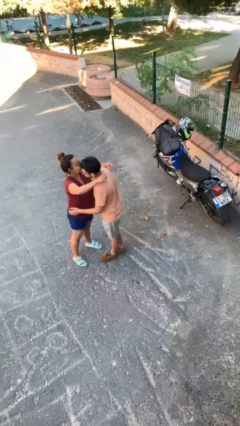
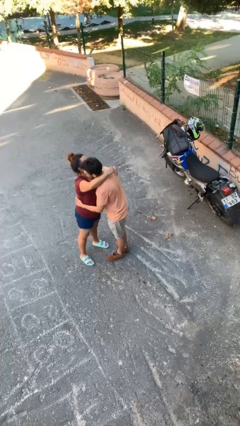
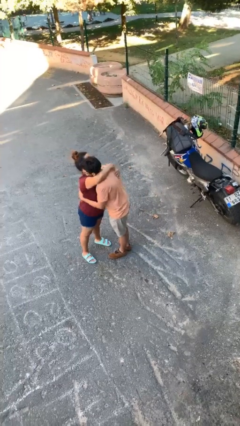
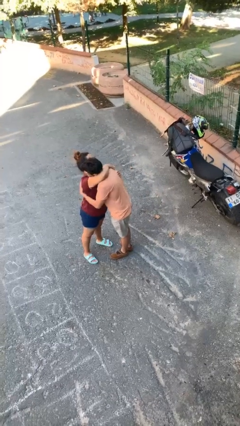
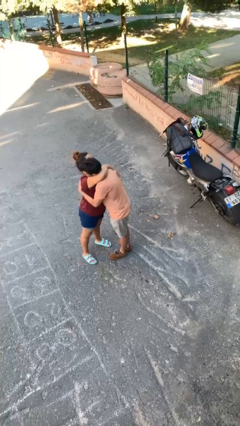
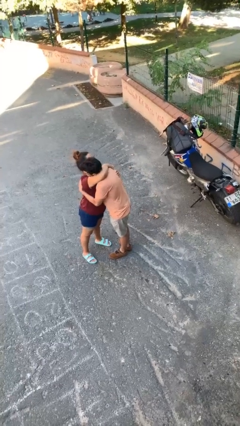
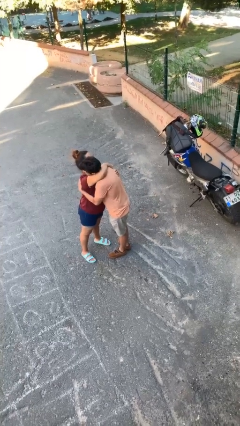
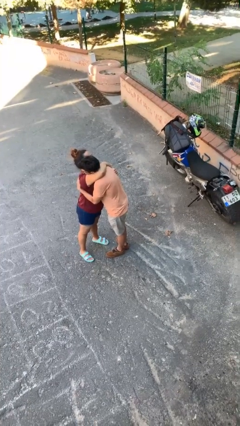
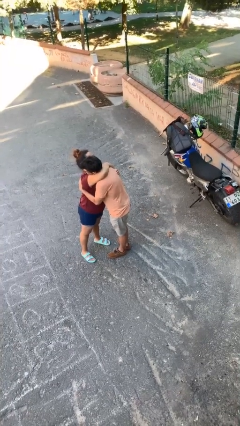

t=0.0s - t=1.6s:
person embraces person

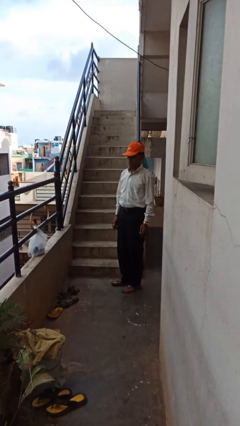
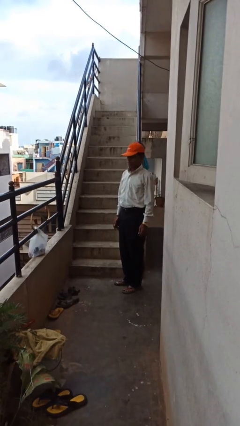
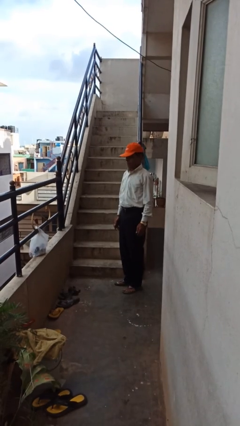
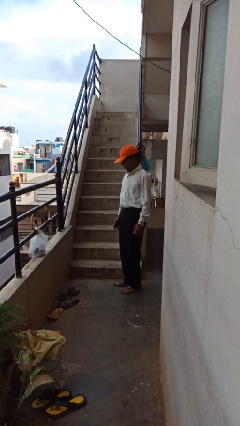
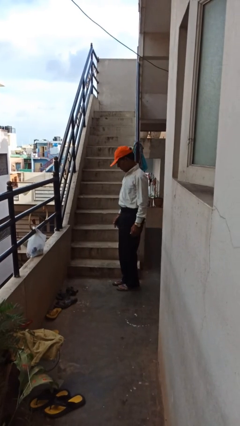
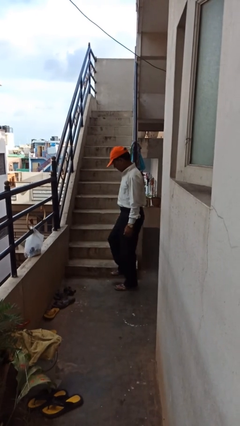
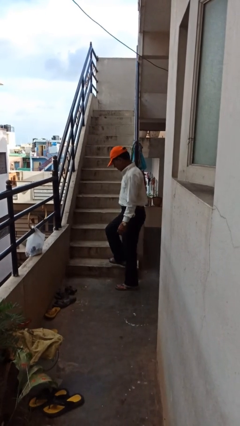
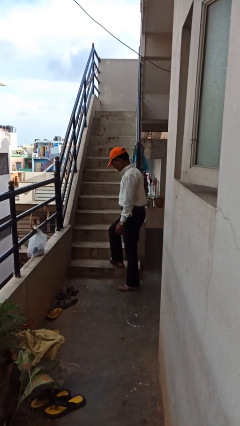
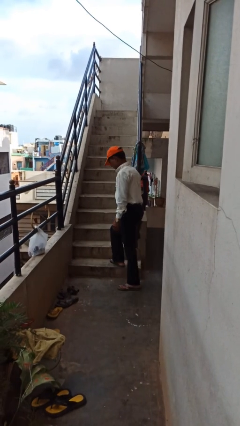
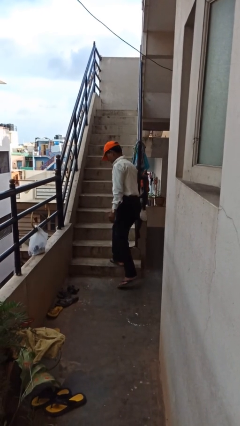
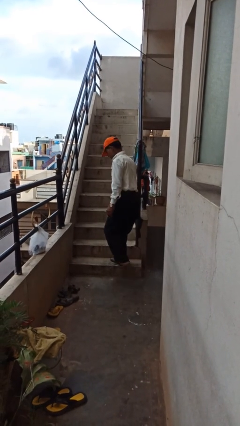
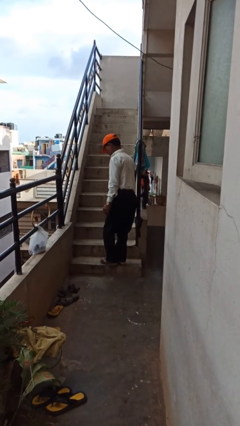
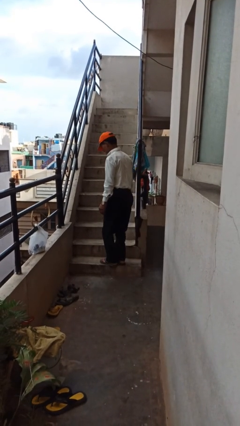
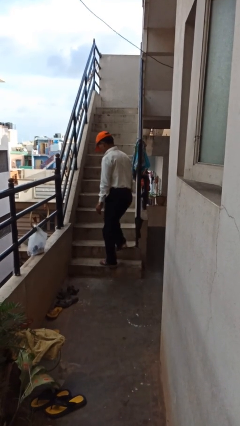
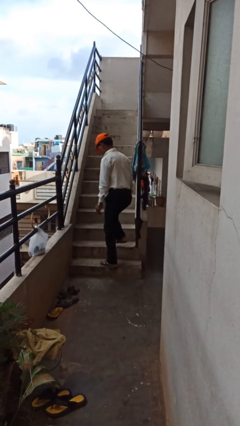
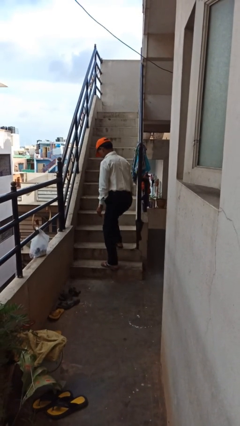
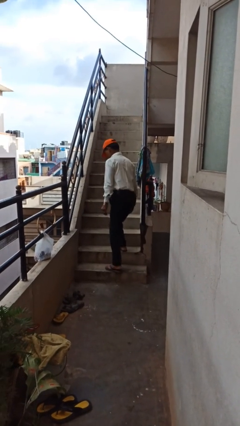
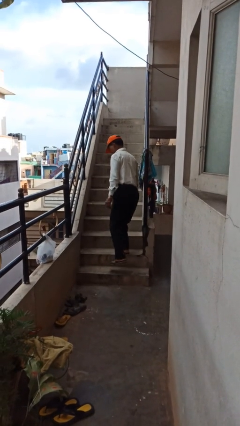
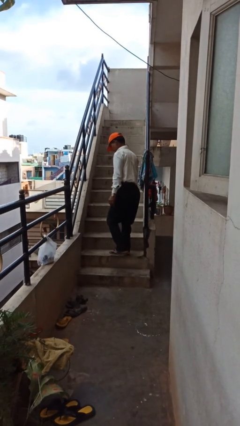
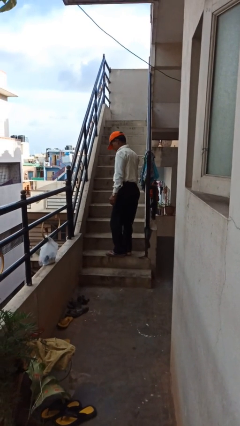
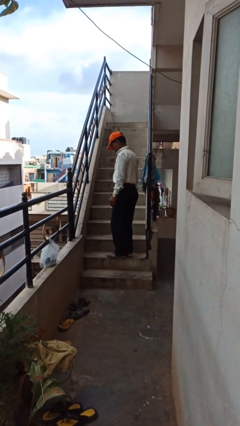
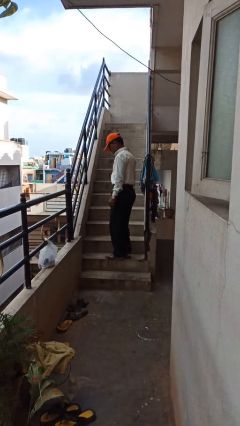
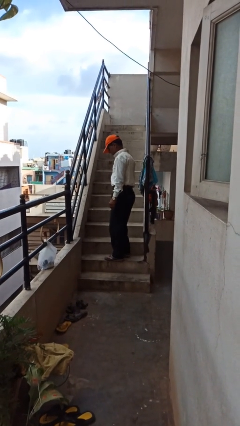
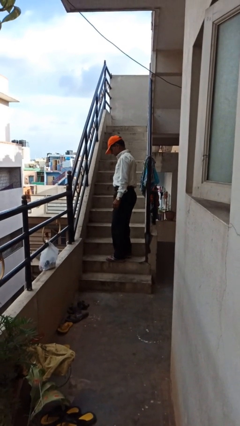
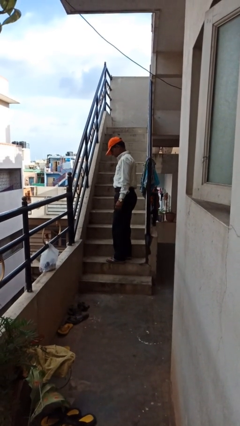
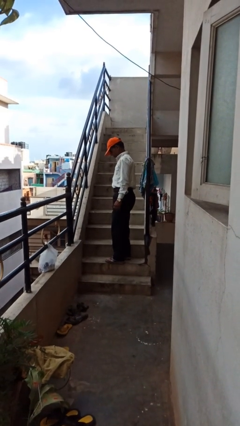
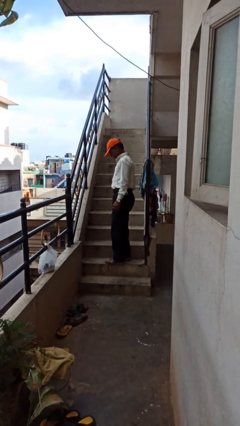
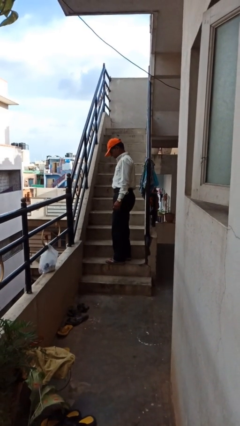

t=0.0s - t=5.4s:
person climbs up stairs

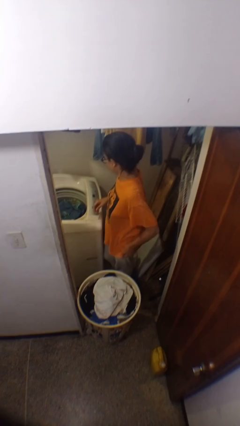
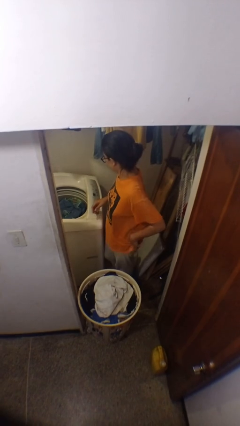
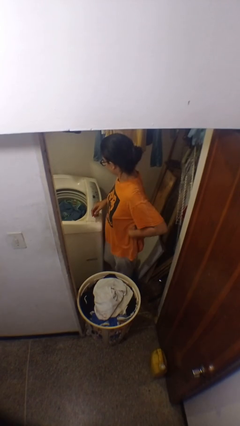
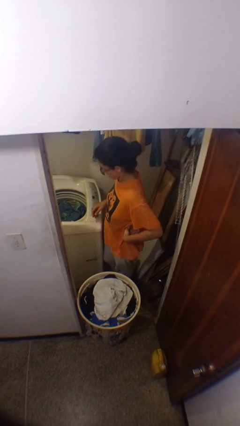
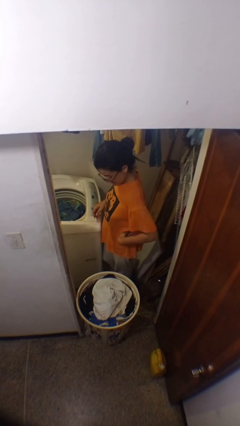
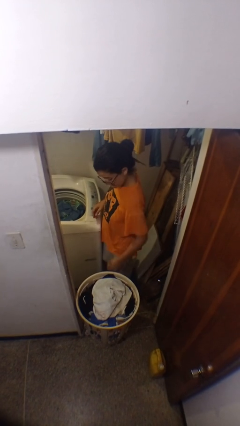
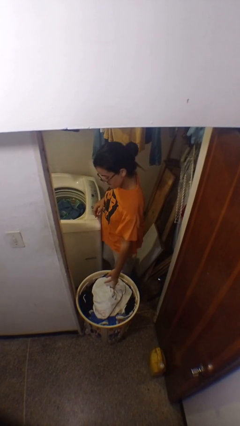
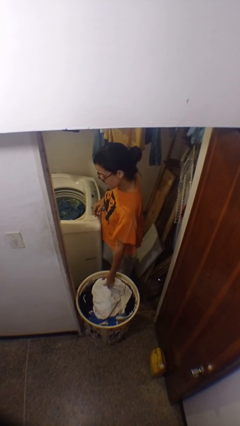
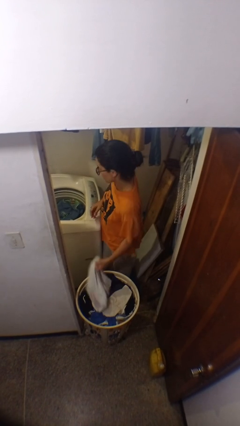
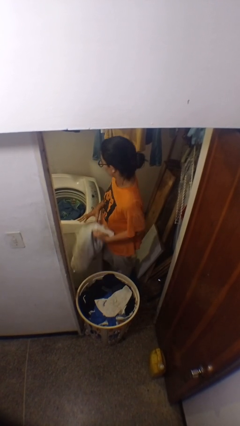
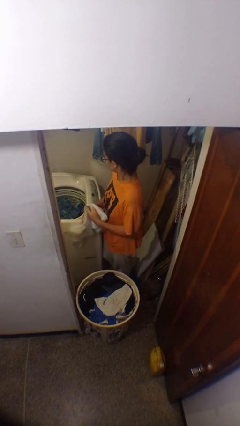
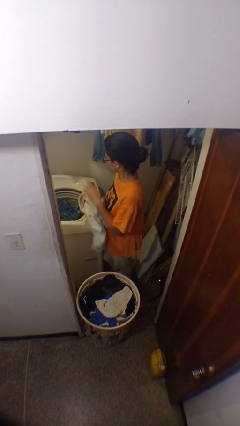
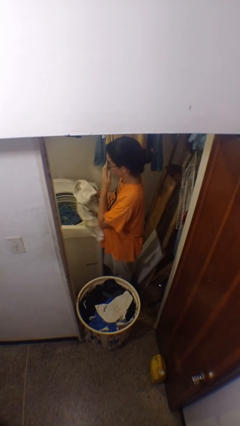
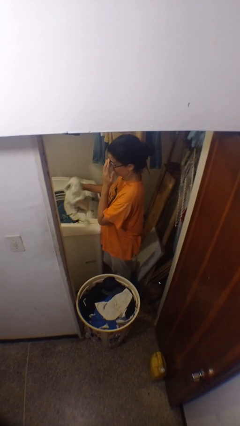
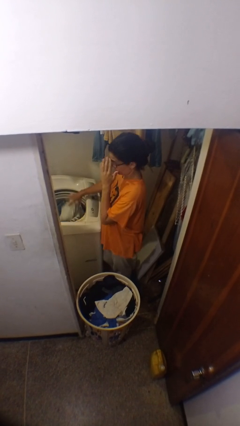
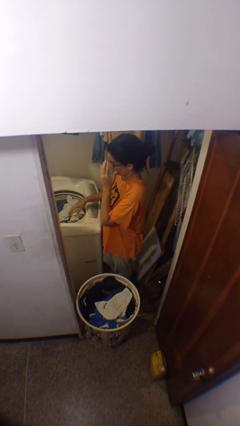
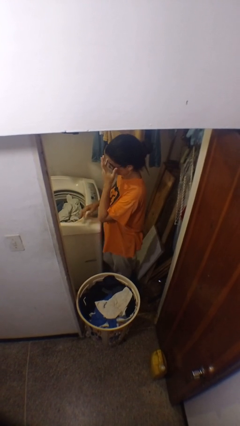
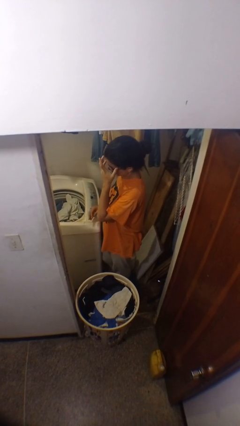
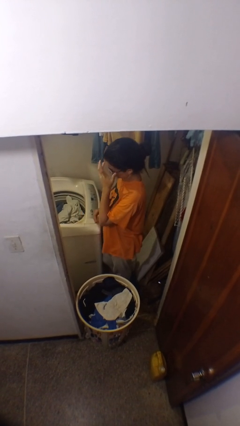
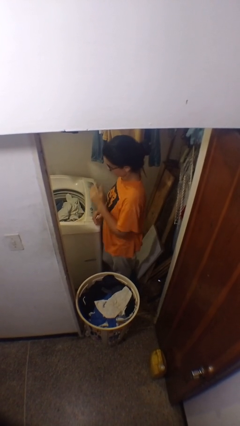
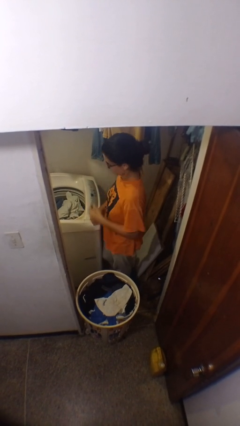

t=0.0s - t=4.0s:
person loads clotheswasher

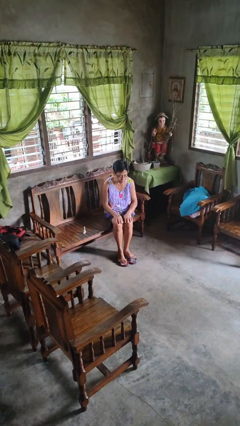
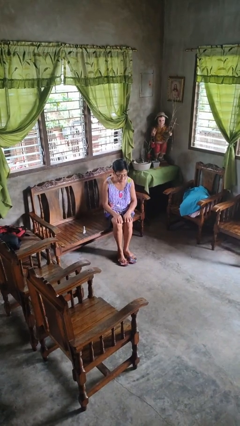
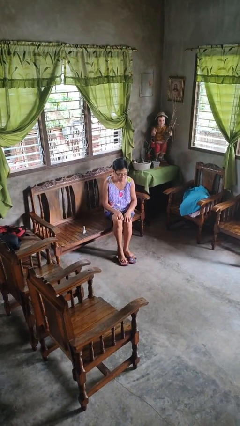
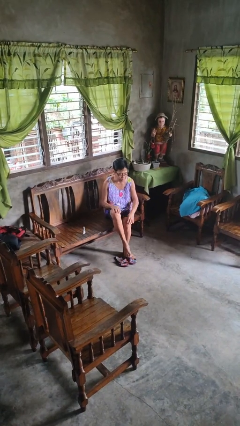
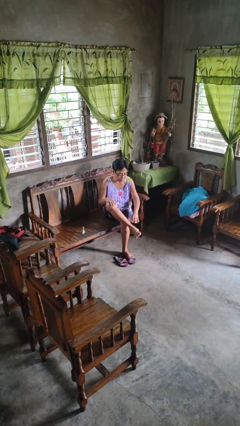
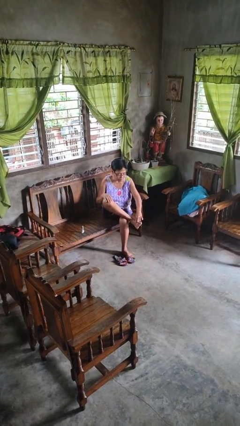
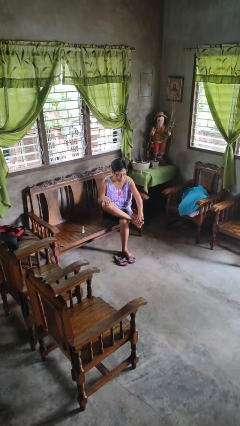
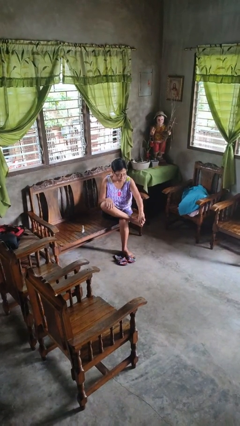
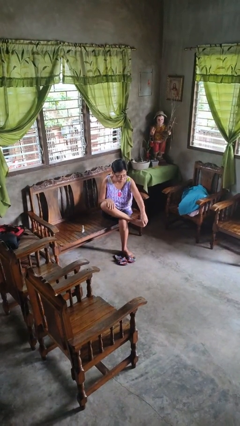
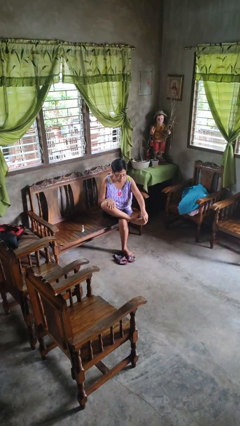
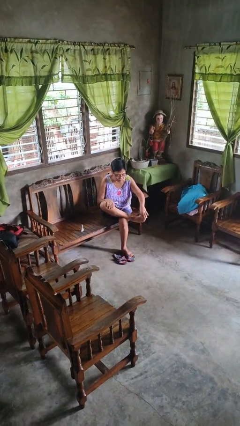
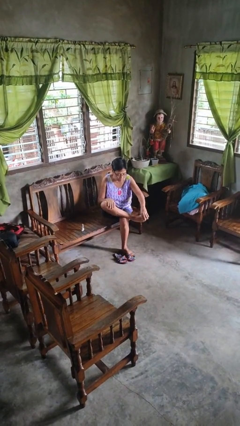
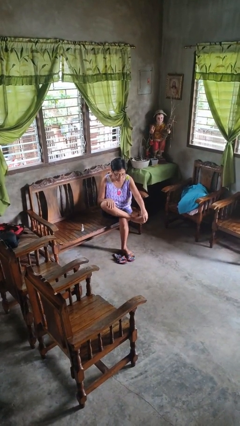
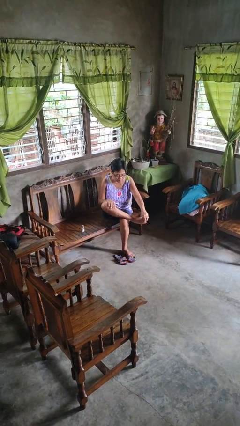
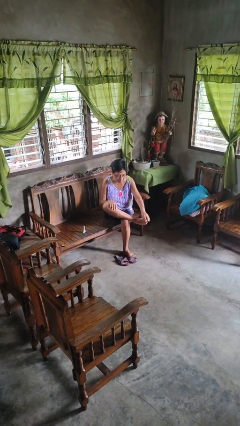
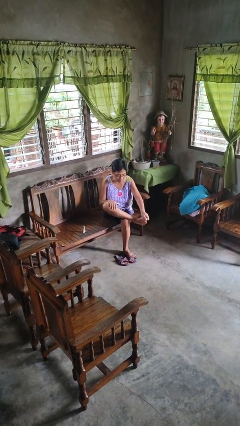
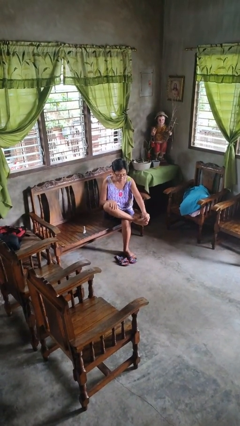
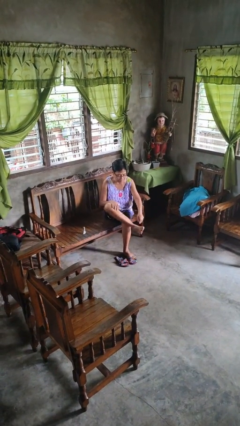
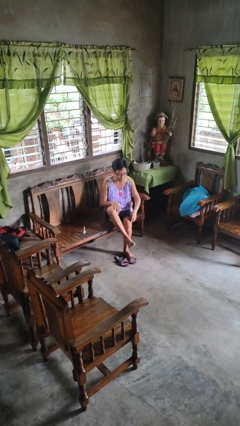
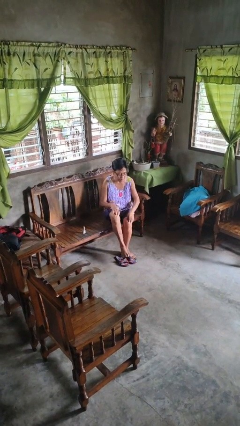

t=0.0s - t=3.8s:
person rubs foot

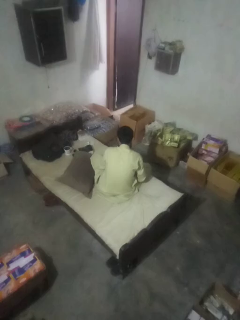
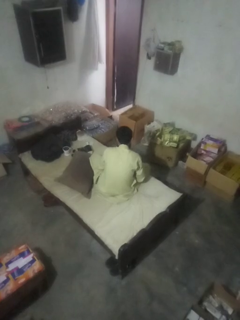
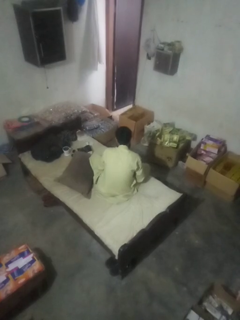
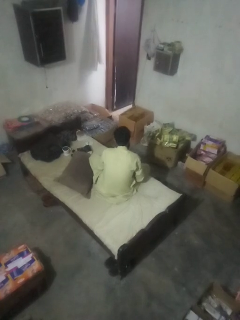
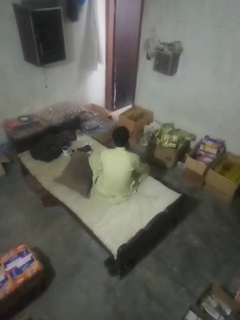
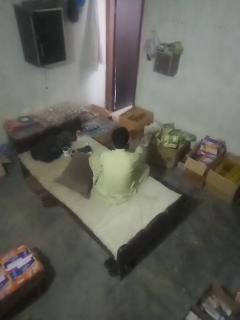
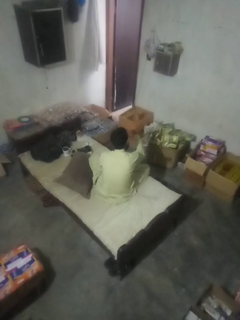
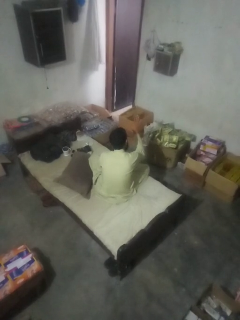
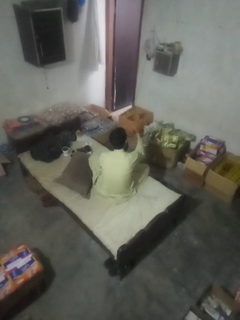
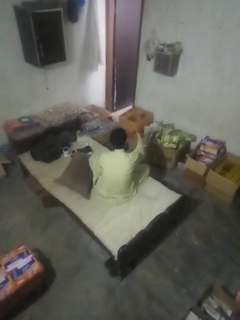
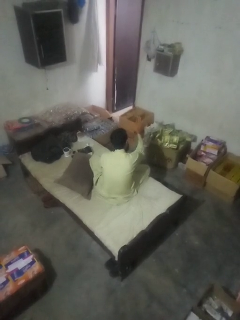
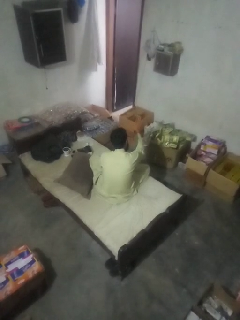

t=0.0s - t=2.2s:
person gestures stop

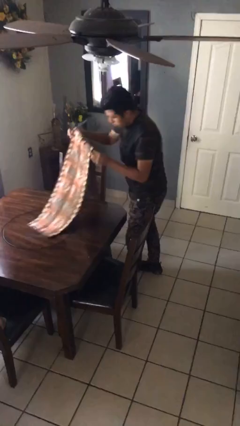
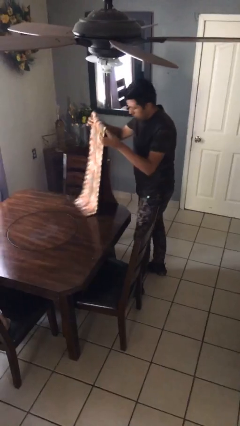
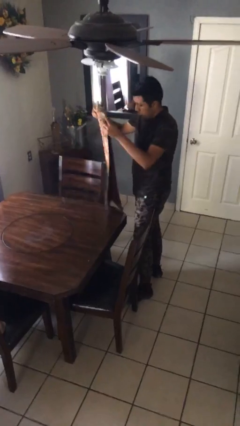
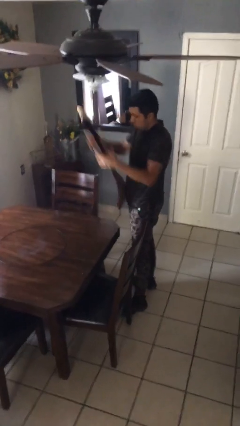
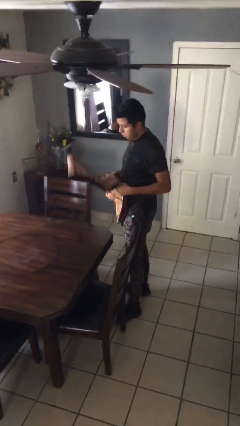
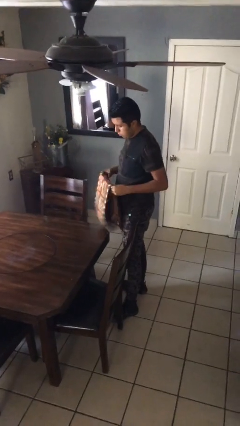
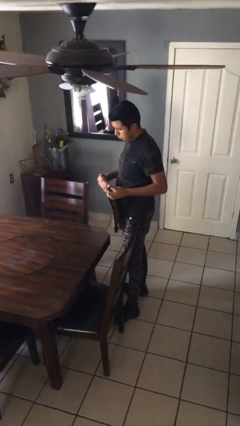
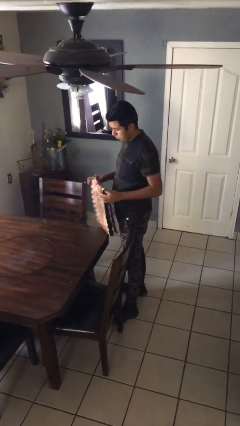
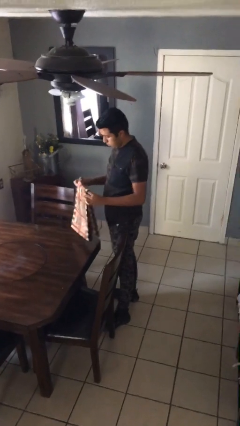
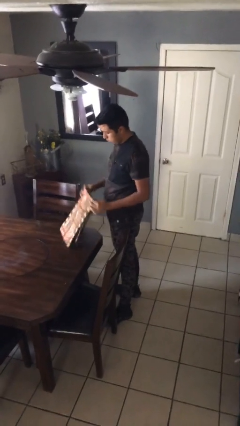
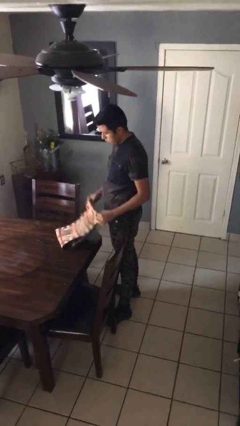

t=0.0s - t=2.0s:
person folds tablecloth
